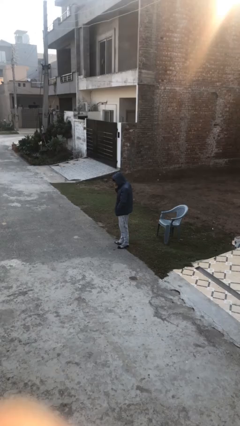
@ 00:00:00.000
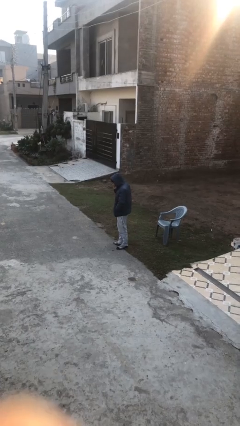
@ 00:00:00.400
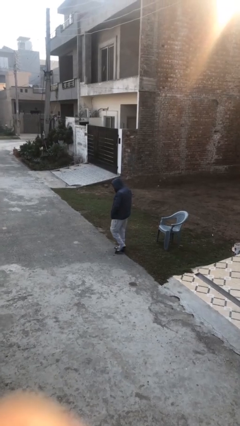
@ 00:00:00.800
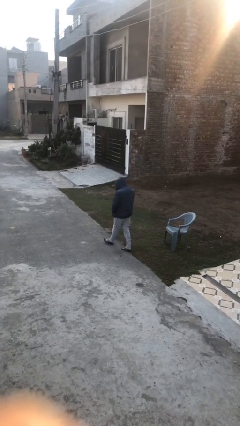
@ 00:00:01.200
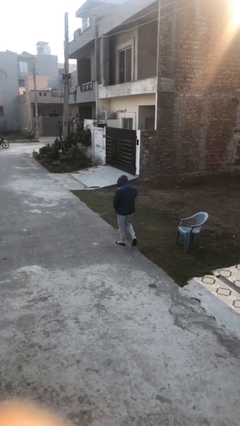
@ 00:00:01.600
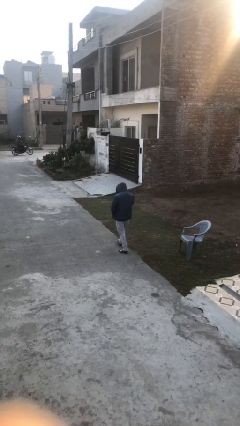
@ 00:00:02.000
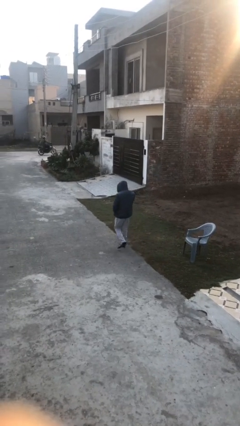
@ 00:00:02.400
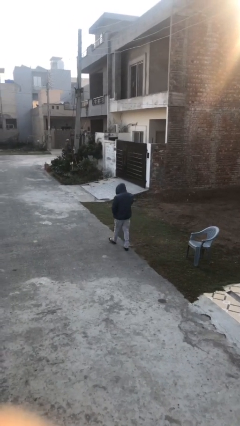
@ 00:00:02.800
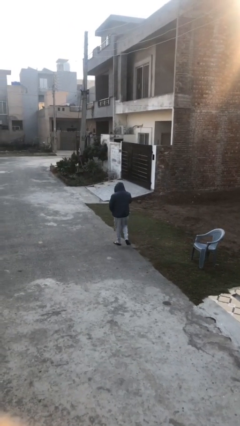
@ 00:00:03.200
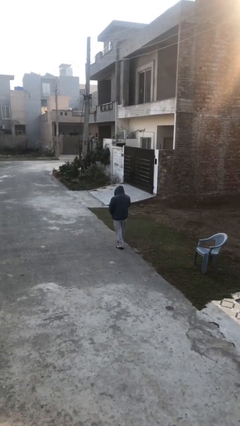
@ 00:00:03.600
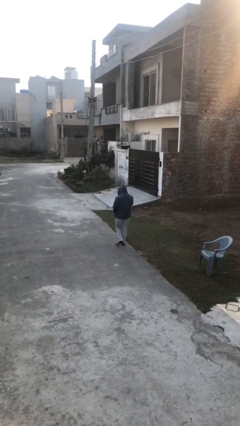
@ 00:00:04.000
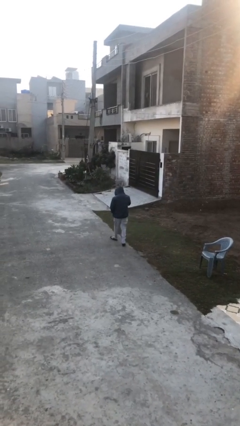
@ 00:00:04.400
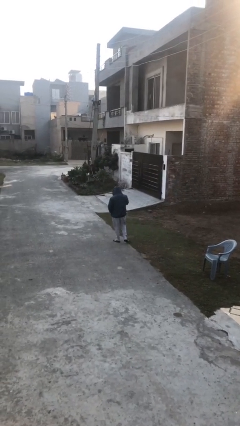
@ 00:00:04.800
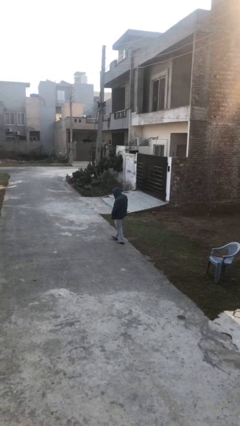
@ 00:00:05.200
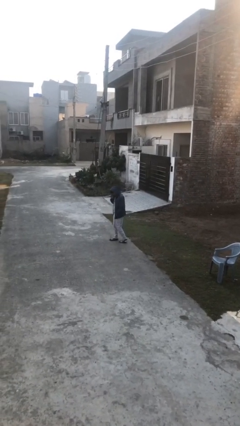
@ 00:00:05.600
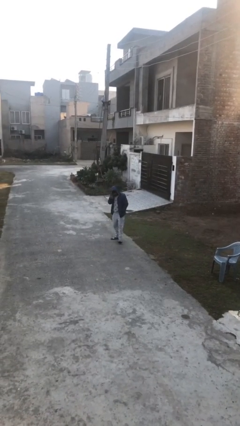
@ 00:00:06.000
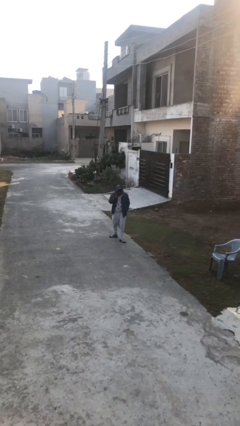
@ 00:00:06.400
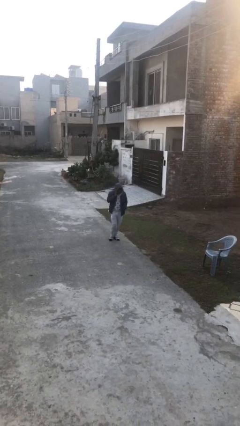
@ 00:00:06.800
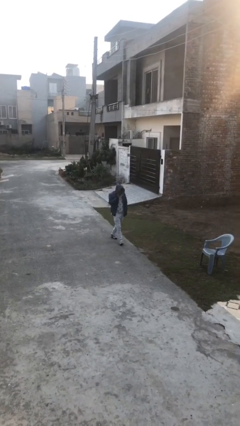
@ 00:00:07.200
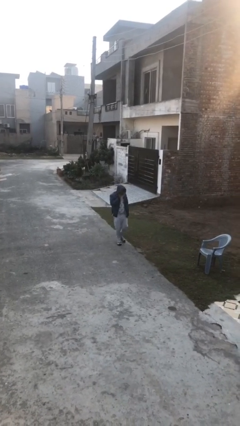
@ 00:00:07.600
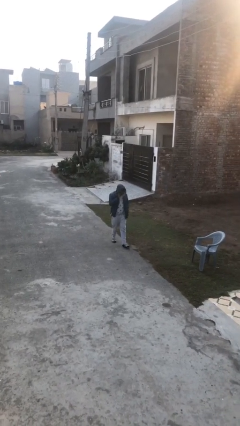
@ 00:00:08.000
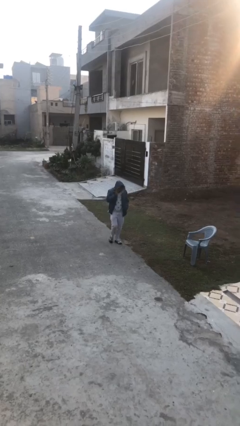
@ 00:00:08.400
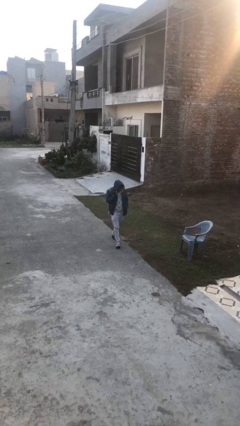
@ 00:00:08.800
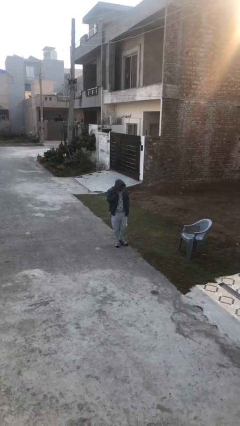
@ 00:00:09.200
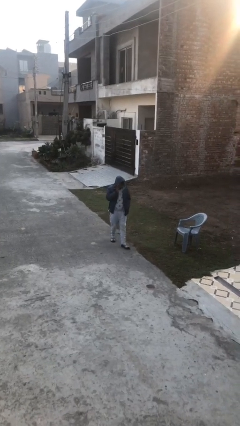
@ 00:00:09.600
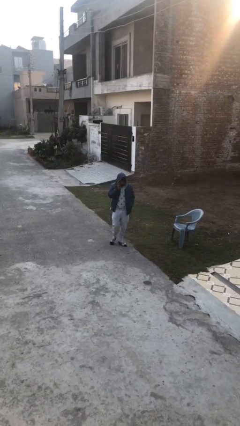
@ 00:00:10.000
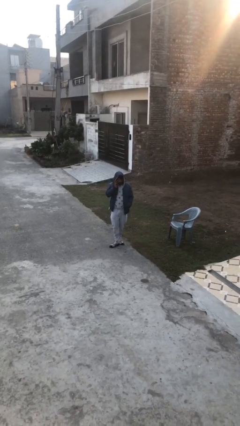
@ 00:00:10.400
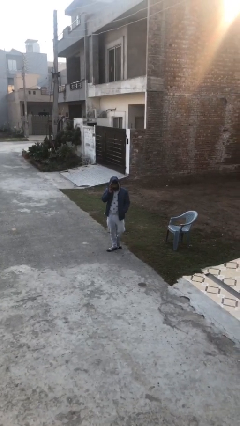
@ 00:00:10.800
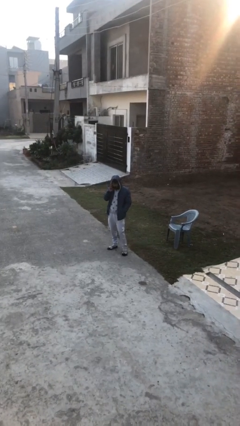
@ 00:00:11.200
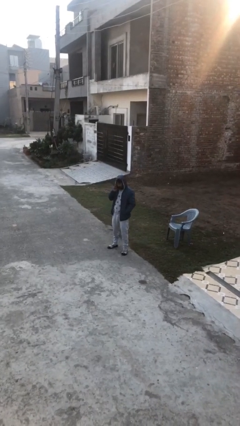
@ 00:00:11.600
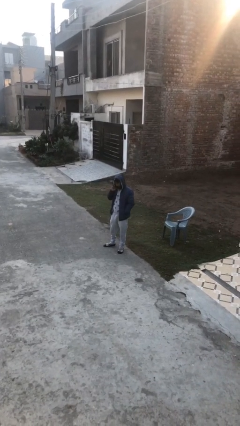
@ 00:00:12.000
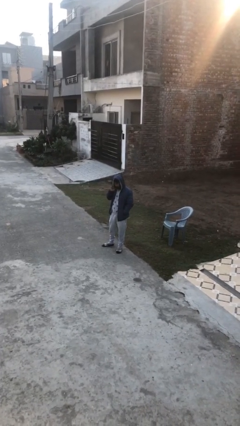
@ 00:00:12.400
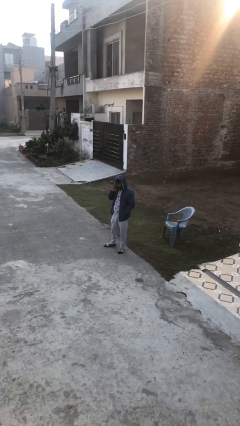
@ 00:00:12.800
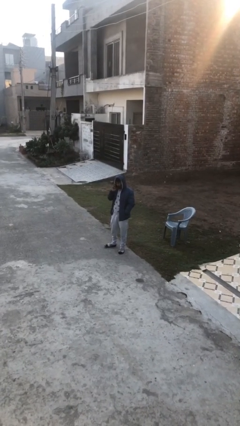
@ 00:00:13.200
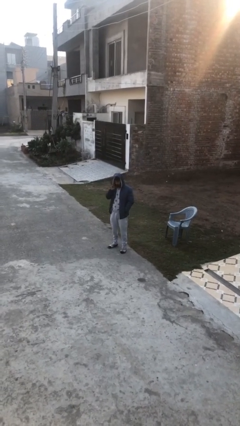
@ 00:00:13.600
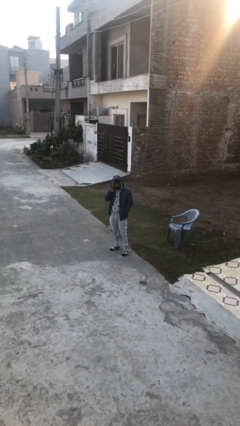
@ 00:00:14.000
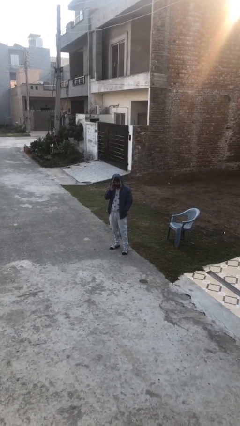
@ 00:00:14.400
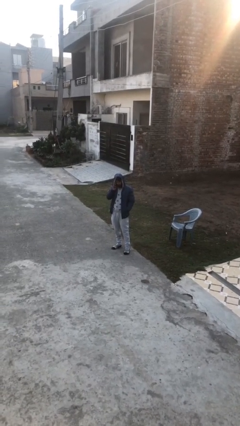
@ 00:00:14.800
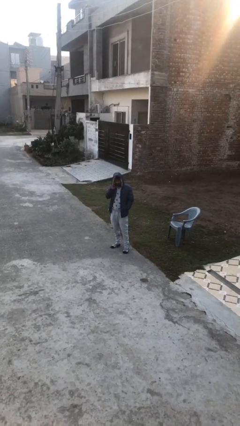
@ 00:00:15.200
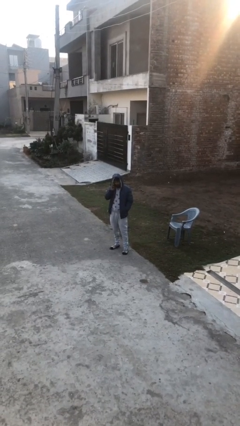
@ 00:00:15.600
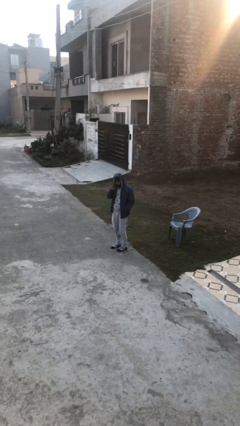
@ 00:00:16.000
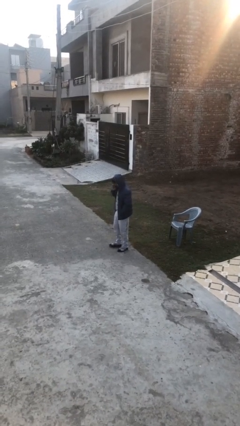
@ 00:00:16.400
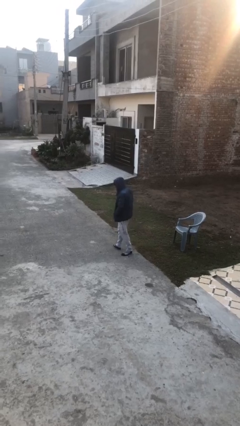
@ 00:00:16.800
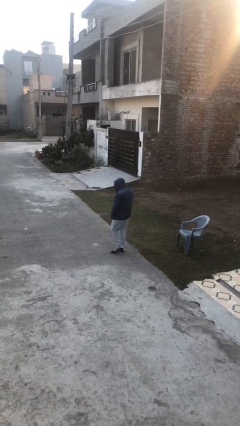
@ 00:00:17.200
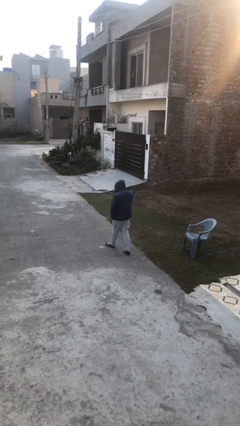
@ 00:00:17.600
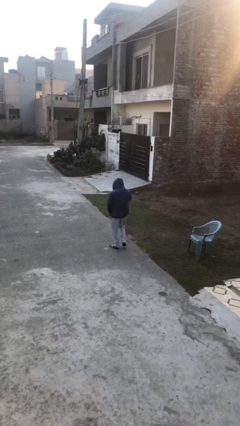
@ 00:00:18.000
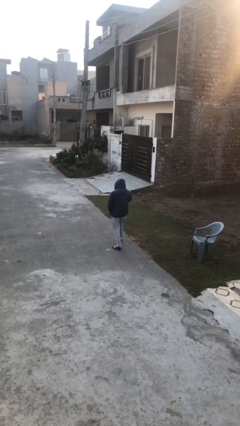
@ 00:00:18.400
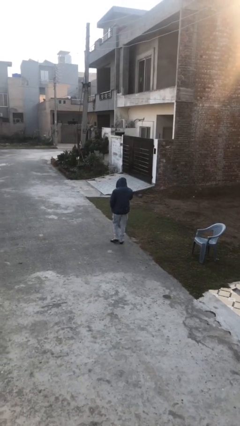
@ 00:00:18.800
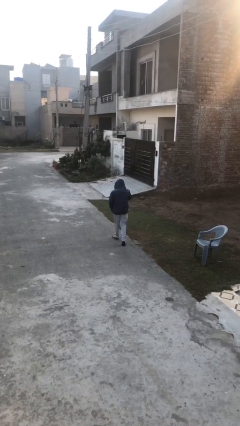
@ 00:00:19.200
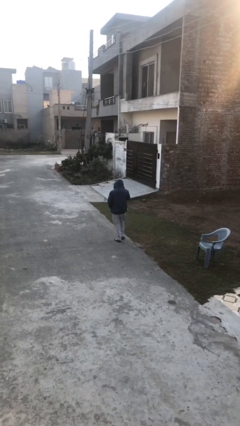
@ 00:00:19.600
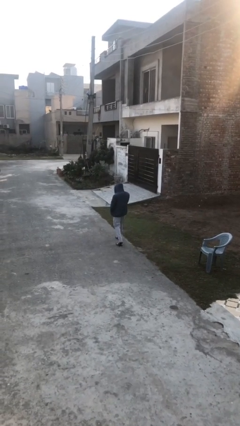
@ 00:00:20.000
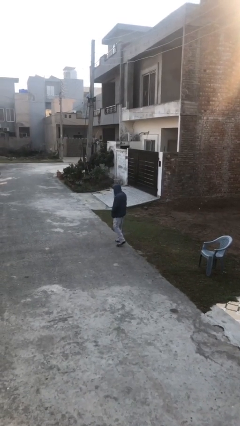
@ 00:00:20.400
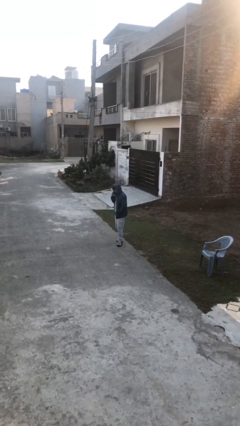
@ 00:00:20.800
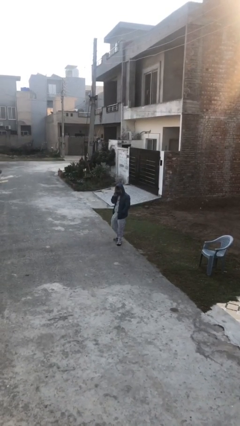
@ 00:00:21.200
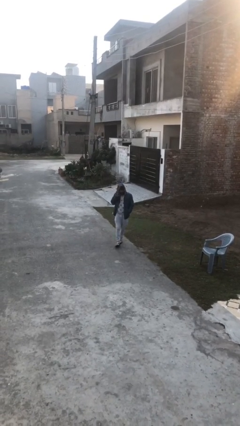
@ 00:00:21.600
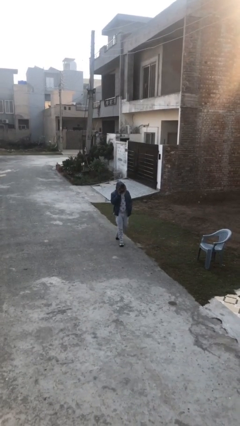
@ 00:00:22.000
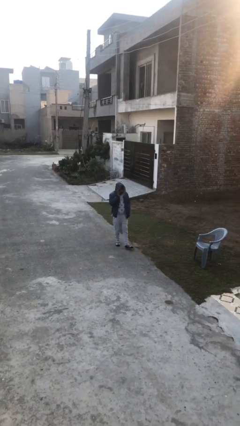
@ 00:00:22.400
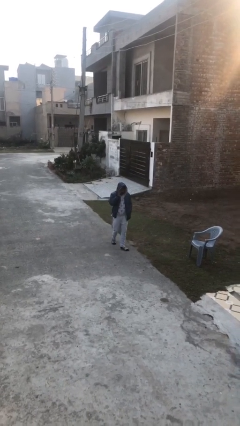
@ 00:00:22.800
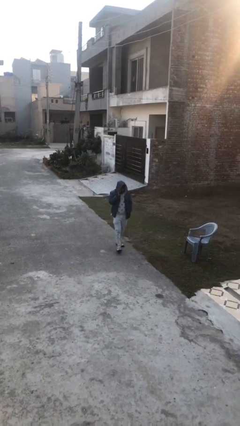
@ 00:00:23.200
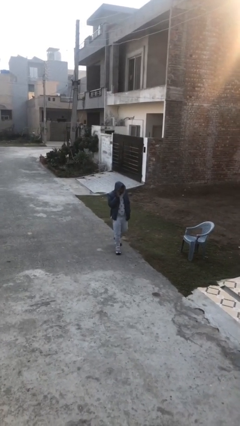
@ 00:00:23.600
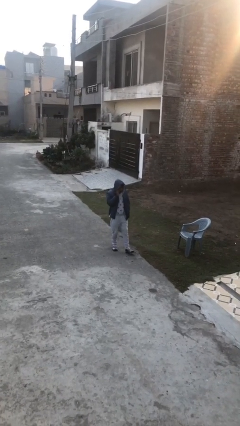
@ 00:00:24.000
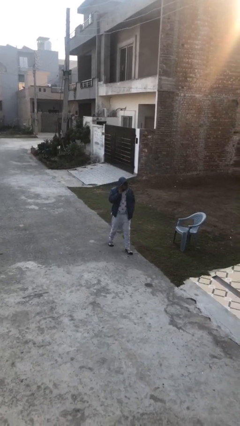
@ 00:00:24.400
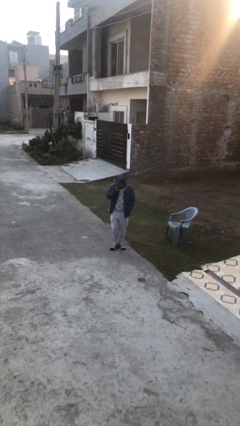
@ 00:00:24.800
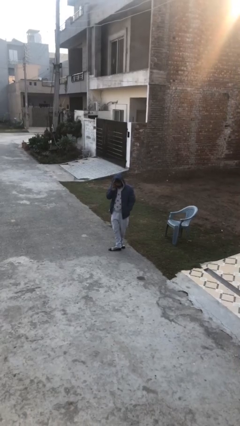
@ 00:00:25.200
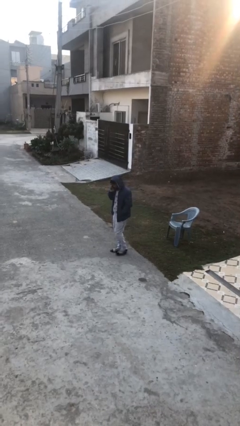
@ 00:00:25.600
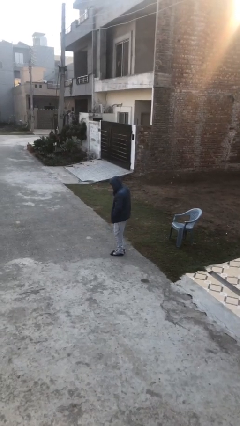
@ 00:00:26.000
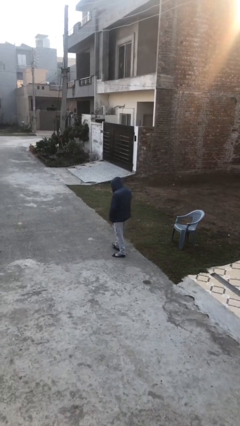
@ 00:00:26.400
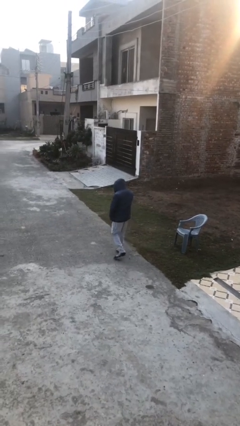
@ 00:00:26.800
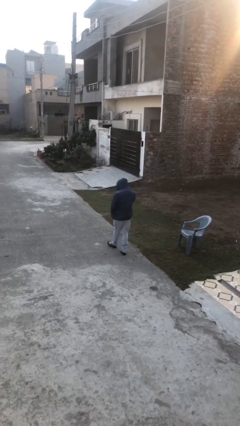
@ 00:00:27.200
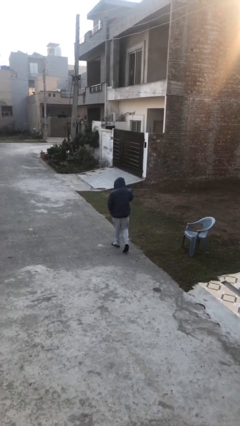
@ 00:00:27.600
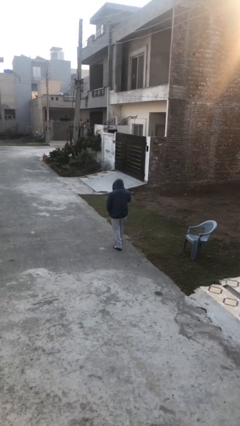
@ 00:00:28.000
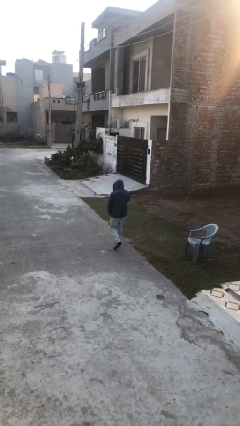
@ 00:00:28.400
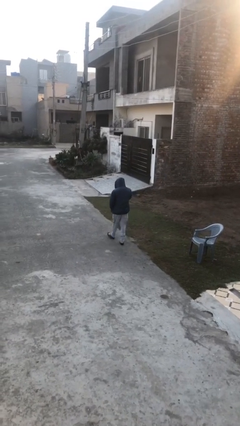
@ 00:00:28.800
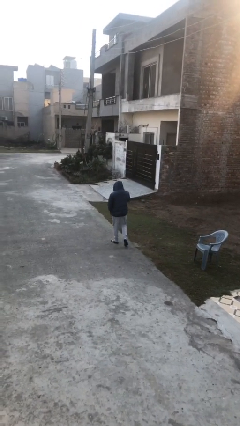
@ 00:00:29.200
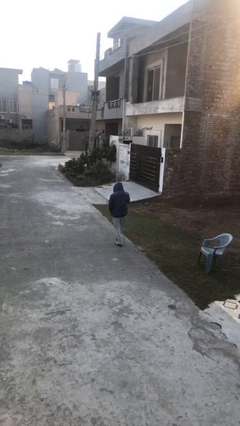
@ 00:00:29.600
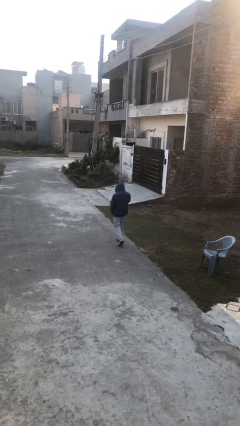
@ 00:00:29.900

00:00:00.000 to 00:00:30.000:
person walks

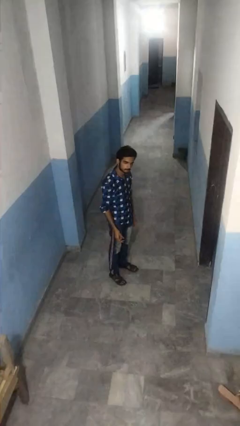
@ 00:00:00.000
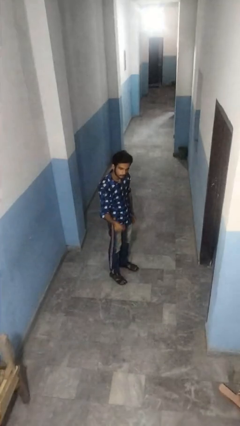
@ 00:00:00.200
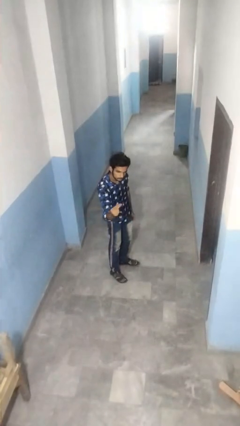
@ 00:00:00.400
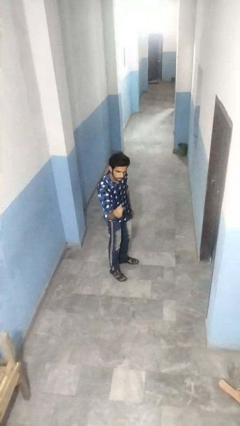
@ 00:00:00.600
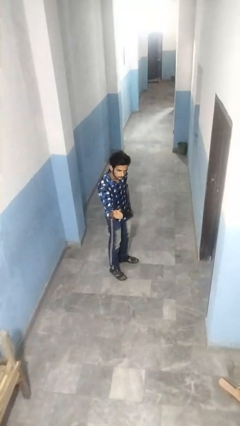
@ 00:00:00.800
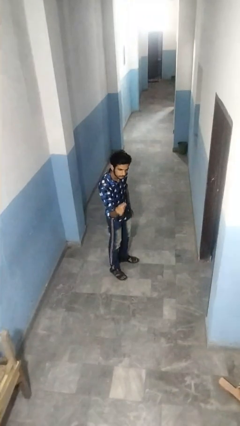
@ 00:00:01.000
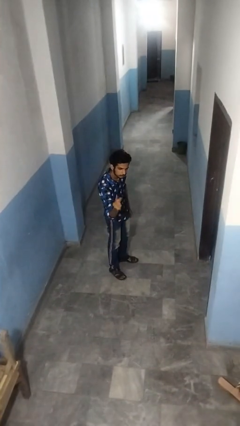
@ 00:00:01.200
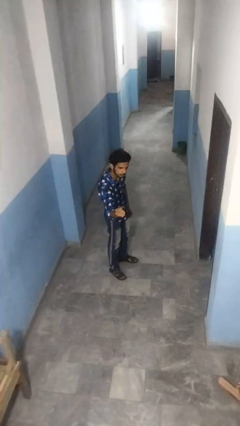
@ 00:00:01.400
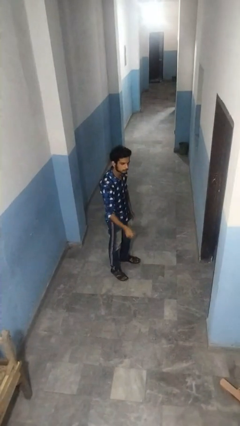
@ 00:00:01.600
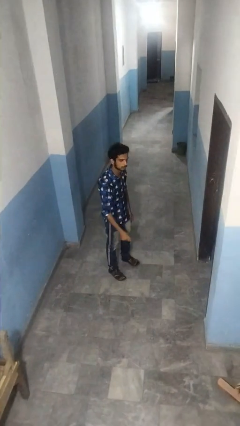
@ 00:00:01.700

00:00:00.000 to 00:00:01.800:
person snaps fingers

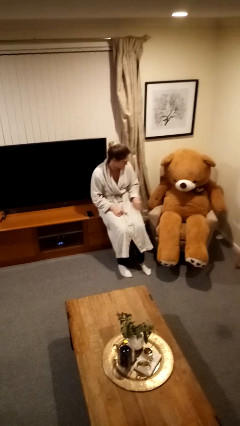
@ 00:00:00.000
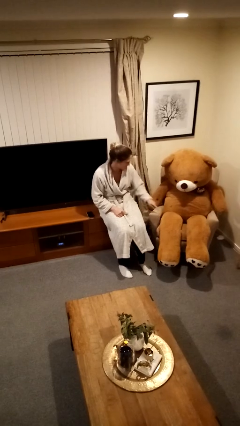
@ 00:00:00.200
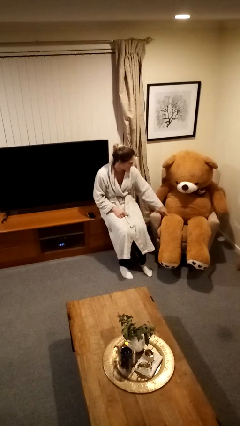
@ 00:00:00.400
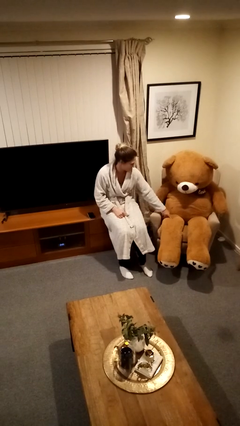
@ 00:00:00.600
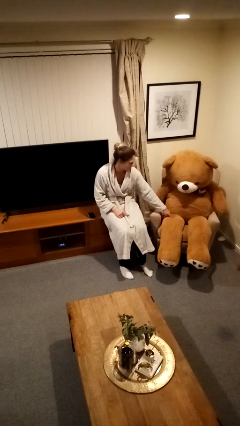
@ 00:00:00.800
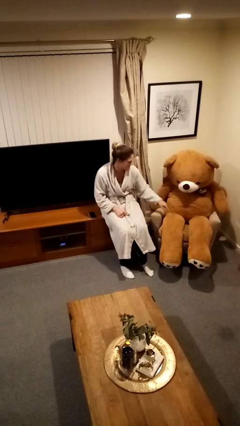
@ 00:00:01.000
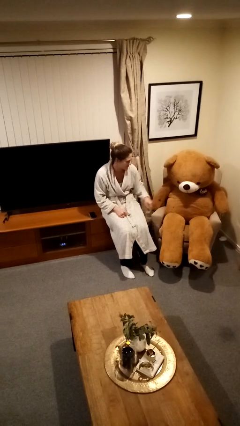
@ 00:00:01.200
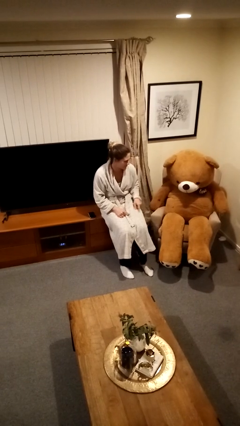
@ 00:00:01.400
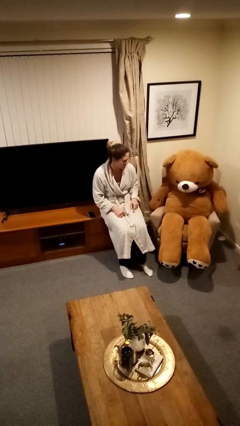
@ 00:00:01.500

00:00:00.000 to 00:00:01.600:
person taps object with finger
